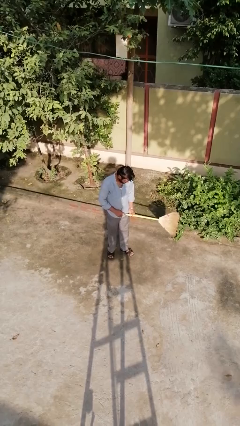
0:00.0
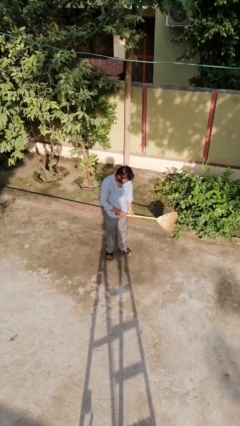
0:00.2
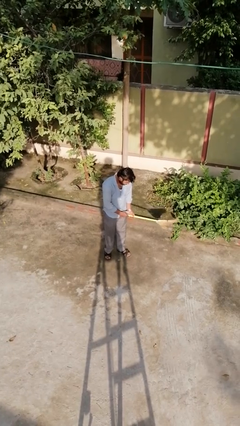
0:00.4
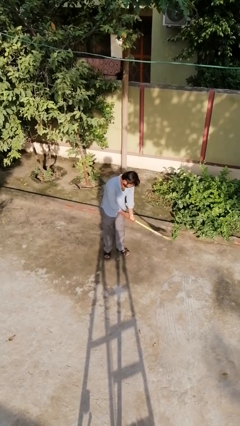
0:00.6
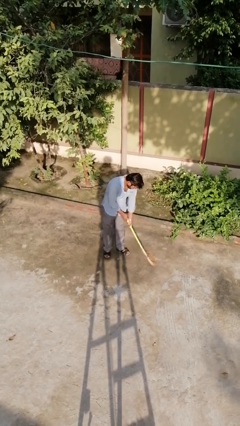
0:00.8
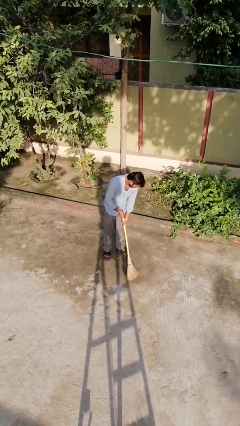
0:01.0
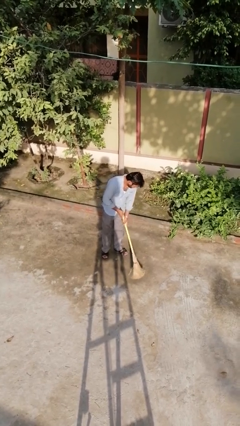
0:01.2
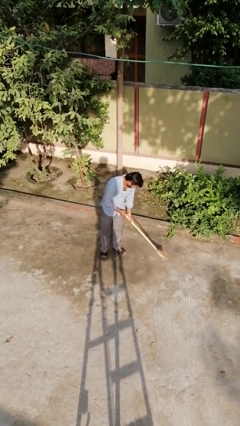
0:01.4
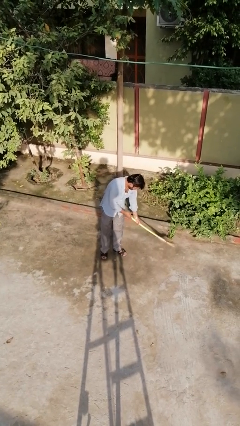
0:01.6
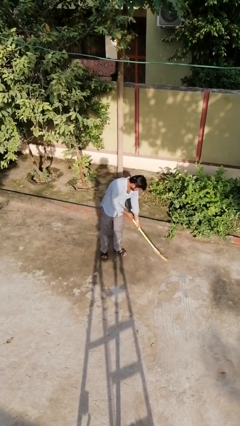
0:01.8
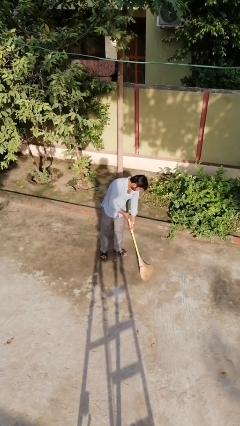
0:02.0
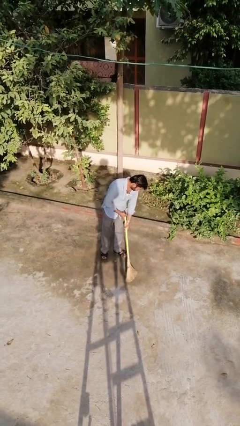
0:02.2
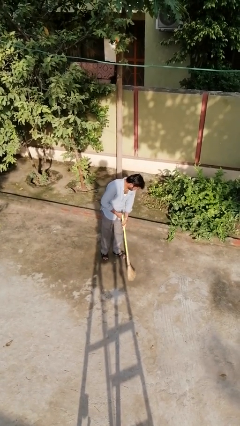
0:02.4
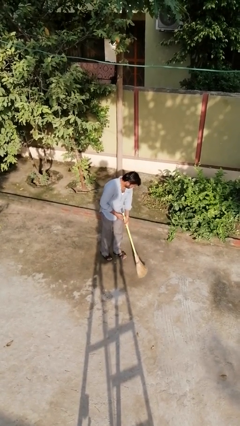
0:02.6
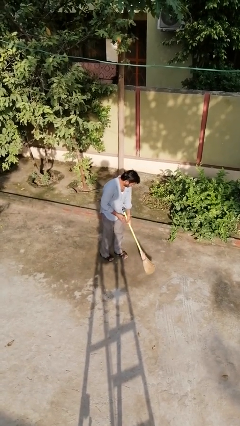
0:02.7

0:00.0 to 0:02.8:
person sweeps floor

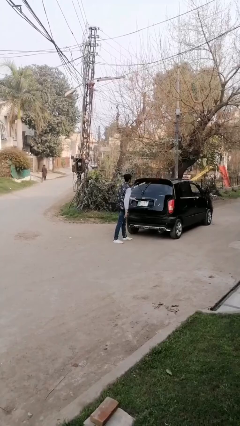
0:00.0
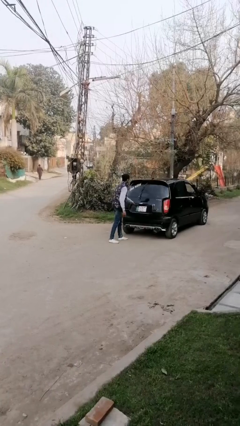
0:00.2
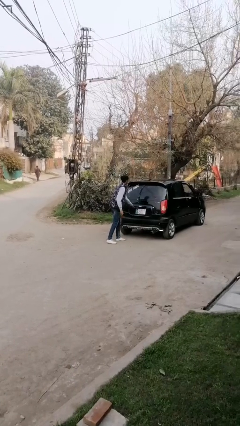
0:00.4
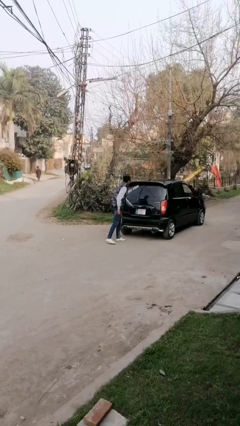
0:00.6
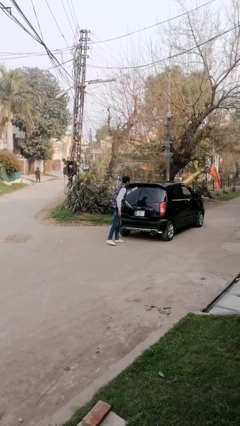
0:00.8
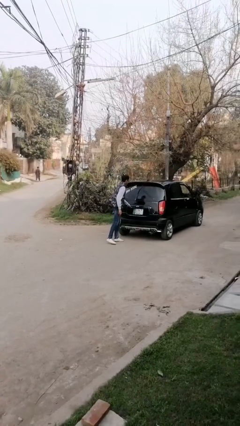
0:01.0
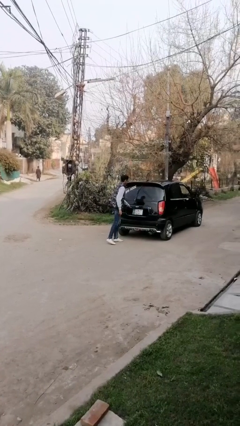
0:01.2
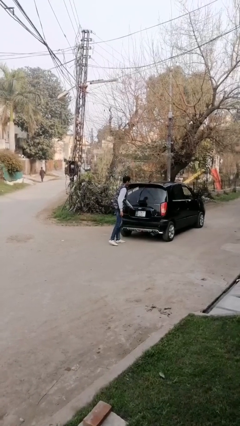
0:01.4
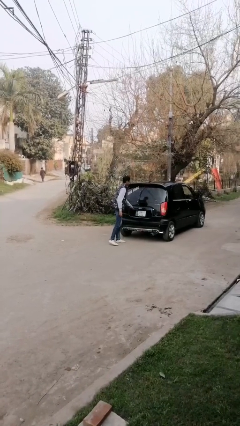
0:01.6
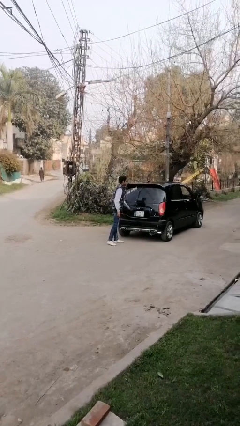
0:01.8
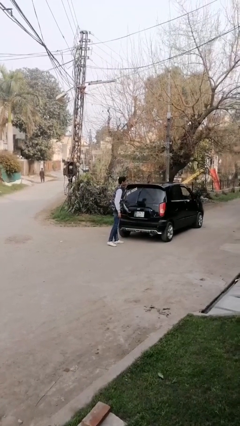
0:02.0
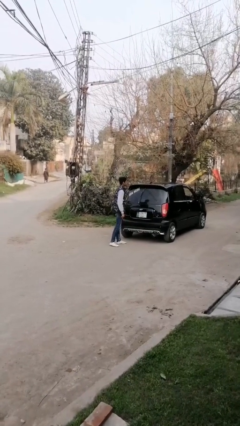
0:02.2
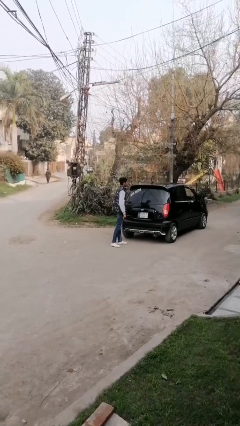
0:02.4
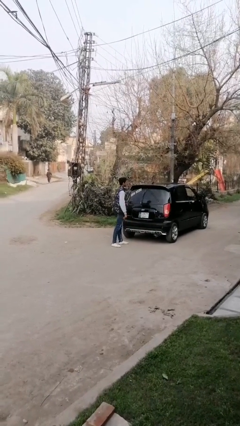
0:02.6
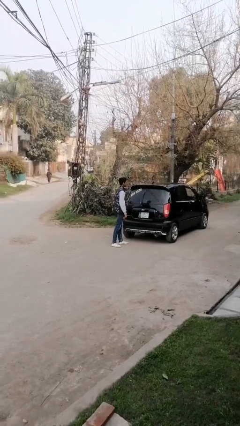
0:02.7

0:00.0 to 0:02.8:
person closes car trunk

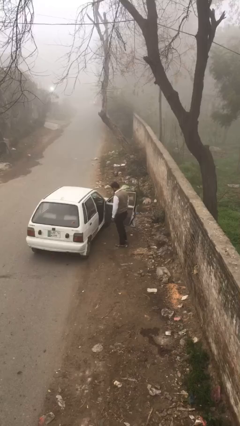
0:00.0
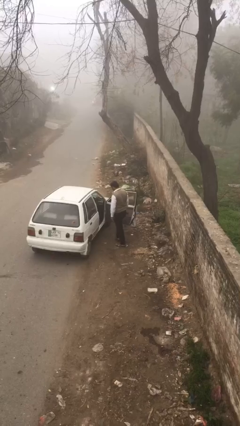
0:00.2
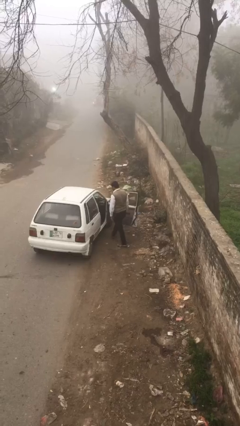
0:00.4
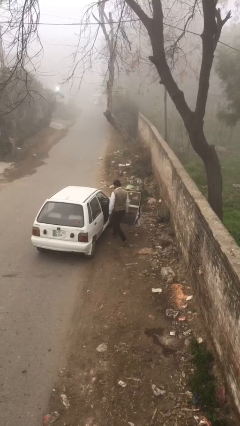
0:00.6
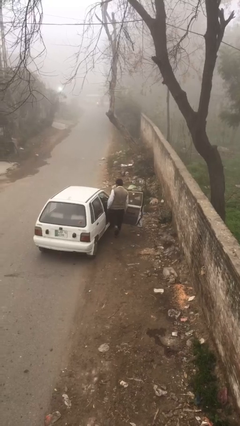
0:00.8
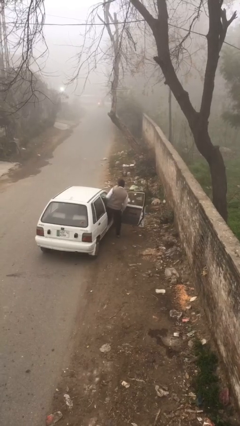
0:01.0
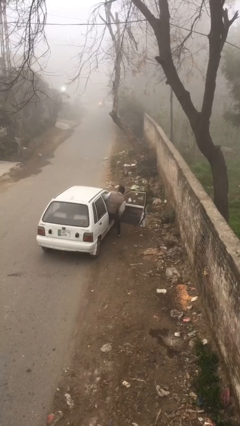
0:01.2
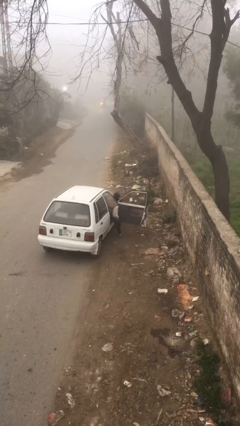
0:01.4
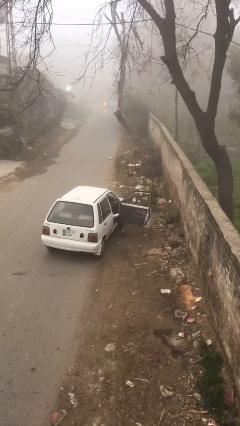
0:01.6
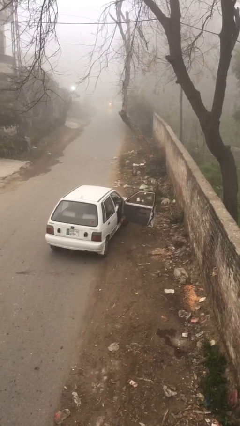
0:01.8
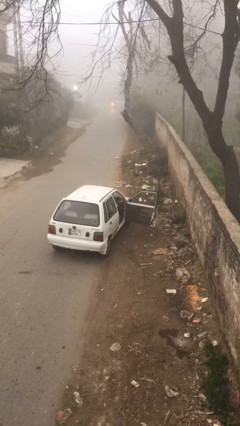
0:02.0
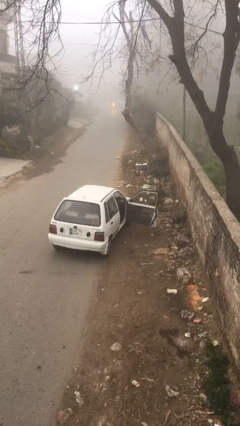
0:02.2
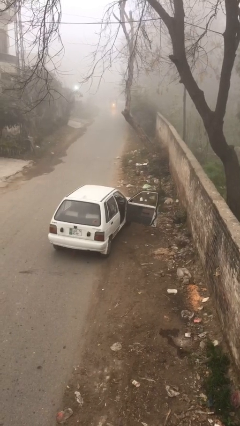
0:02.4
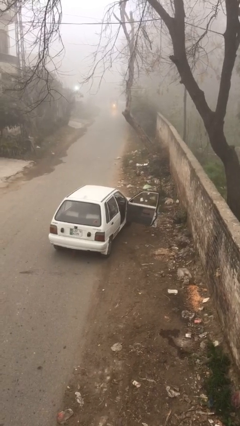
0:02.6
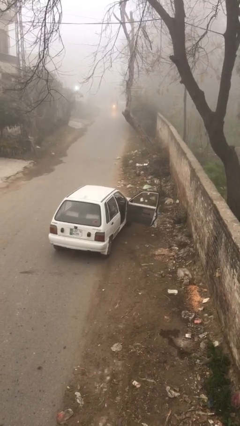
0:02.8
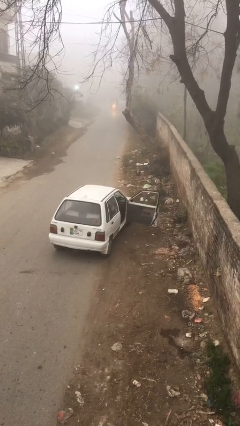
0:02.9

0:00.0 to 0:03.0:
person enters car

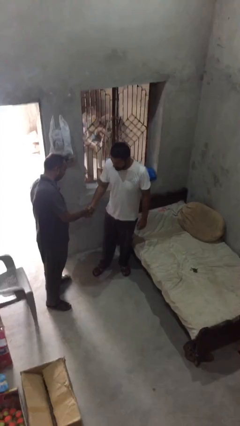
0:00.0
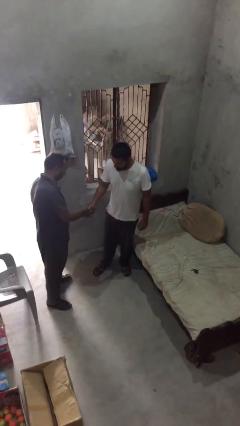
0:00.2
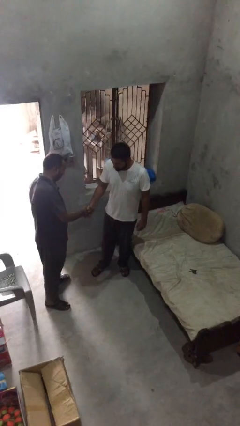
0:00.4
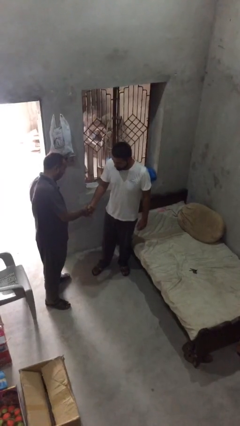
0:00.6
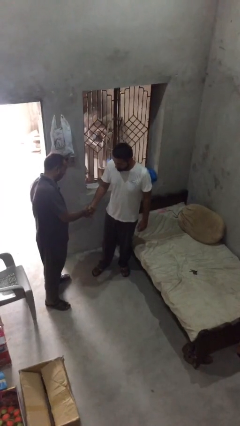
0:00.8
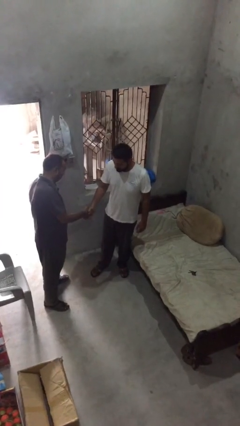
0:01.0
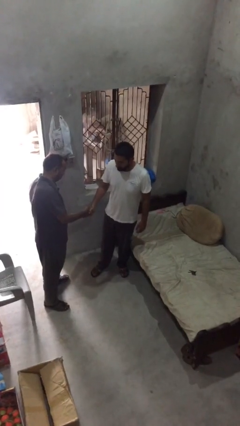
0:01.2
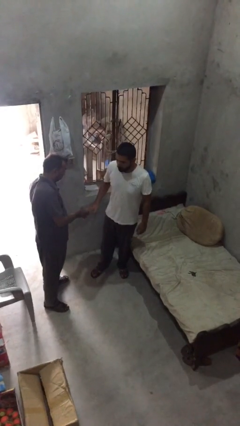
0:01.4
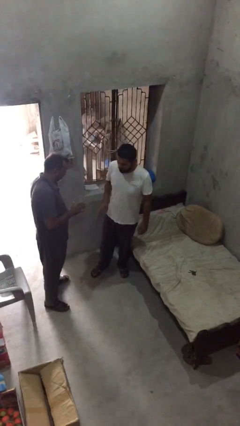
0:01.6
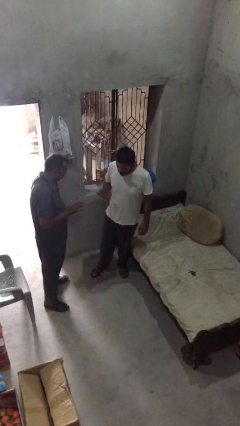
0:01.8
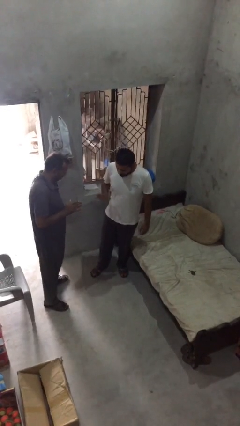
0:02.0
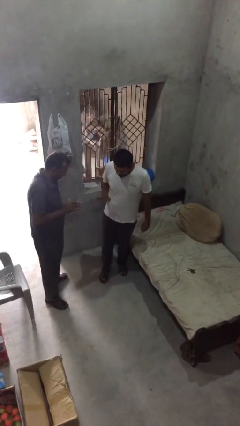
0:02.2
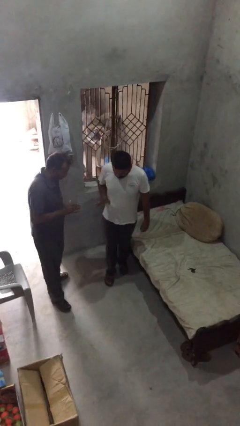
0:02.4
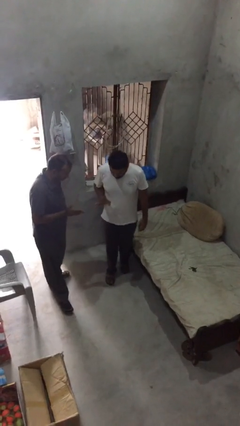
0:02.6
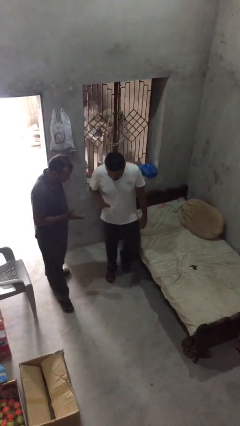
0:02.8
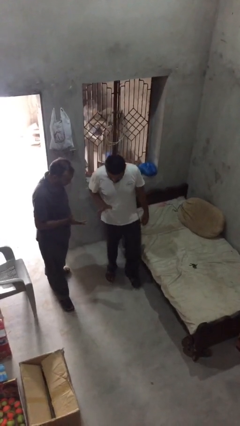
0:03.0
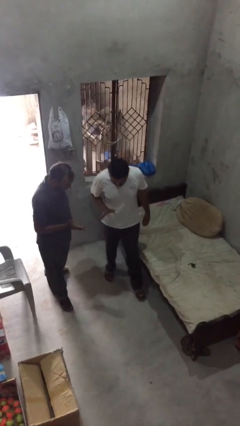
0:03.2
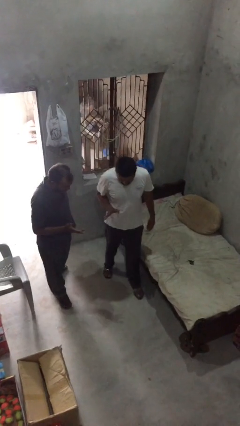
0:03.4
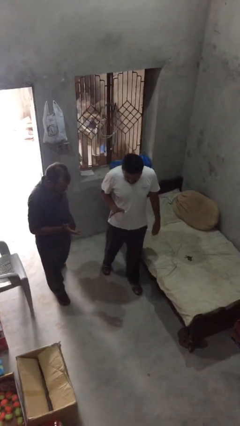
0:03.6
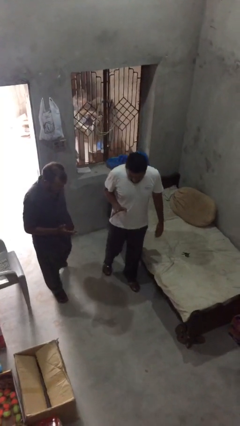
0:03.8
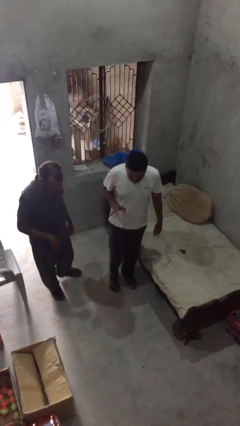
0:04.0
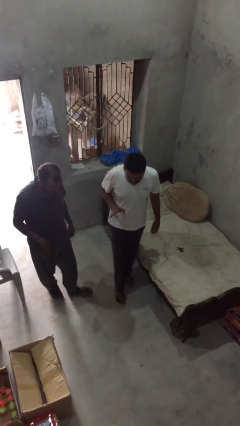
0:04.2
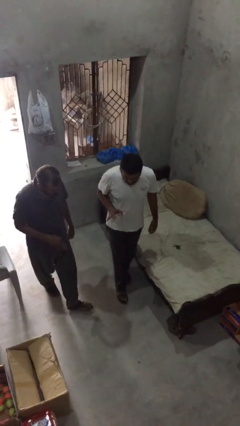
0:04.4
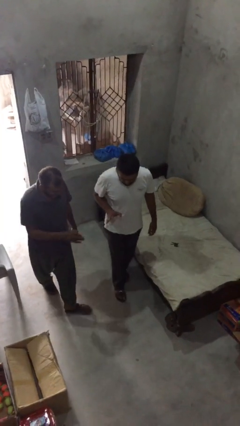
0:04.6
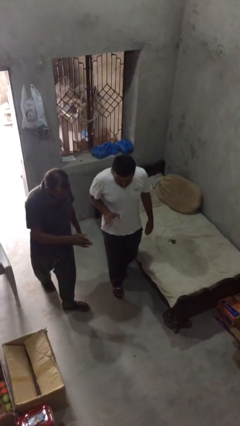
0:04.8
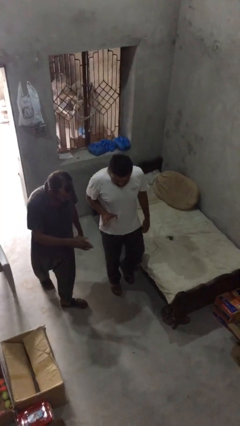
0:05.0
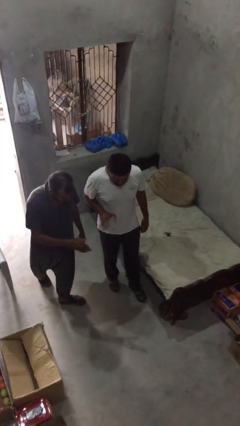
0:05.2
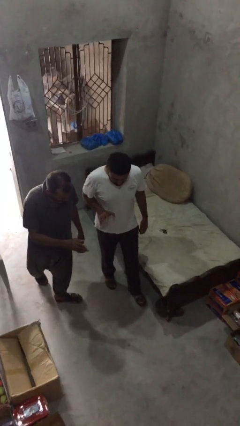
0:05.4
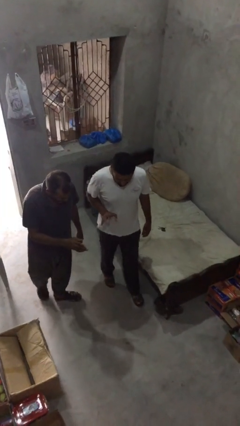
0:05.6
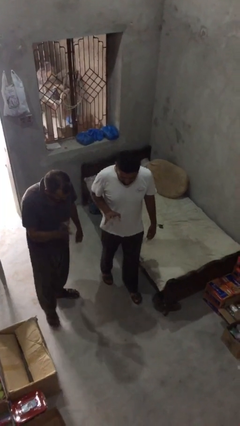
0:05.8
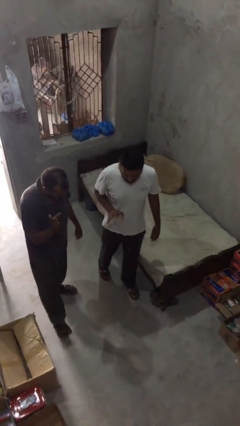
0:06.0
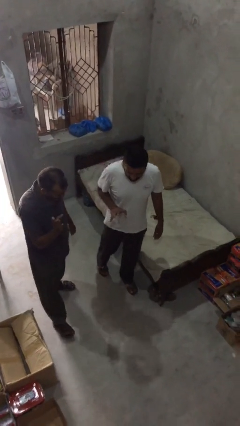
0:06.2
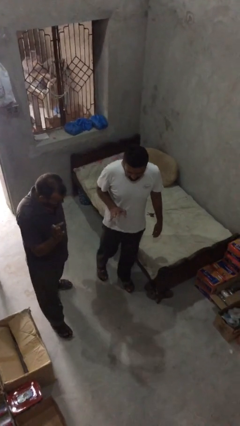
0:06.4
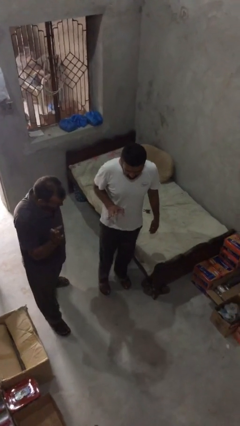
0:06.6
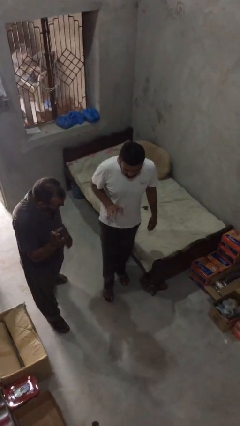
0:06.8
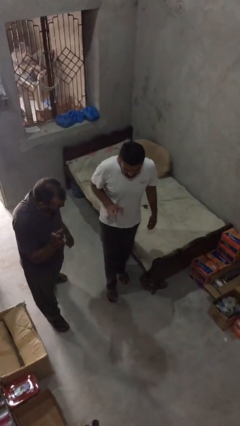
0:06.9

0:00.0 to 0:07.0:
person talks to person

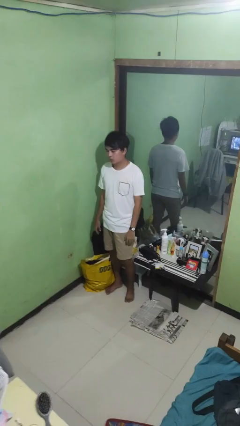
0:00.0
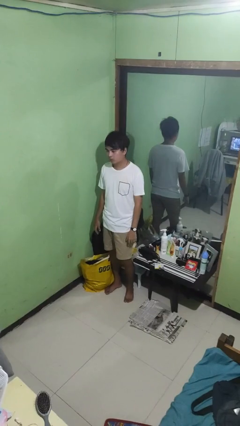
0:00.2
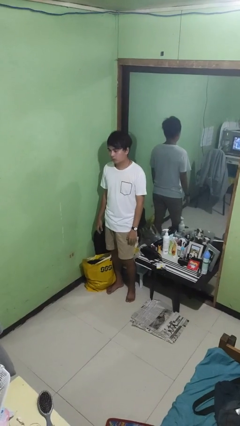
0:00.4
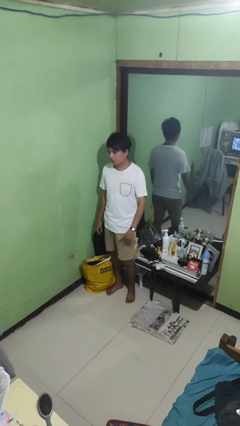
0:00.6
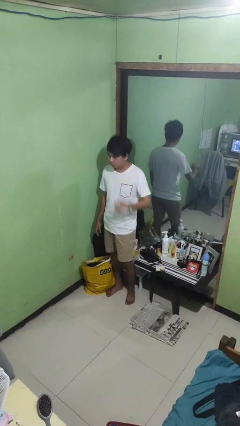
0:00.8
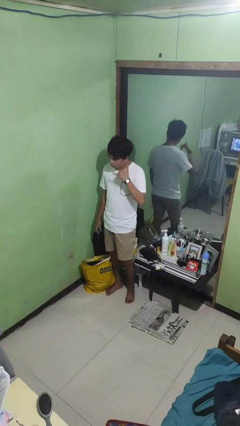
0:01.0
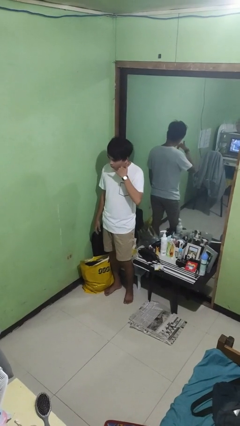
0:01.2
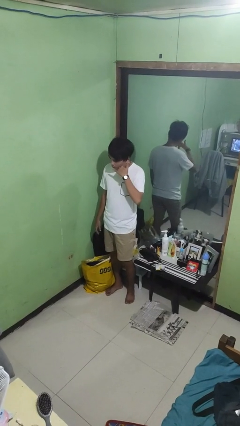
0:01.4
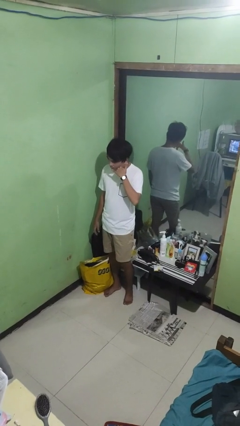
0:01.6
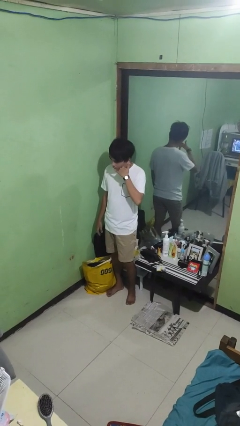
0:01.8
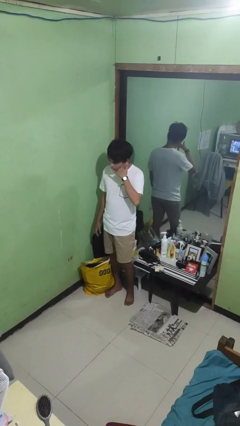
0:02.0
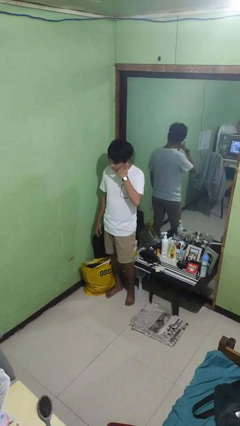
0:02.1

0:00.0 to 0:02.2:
person gestures call me
